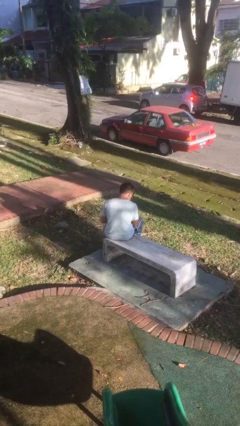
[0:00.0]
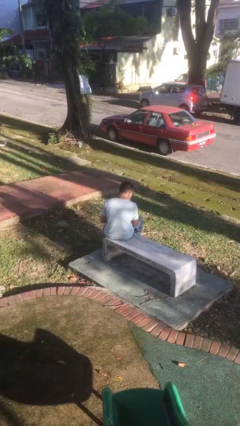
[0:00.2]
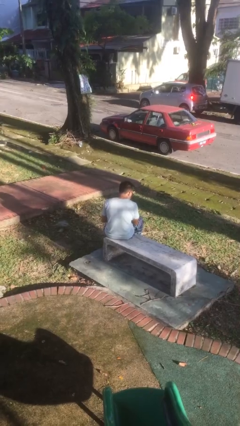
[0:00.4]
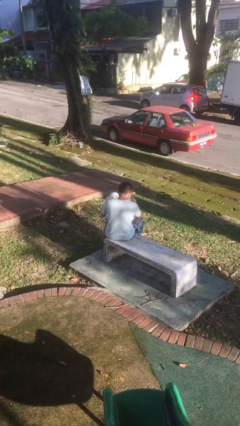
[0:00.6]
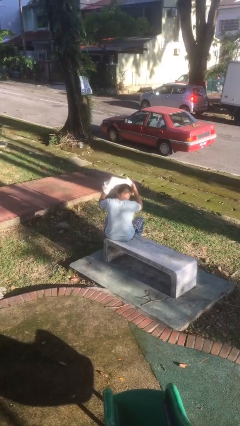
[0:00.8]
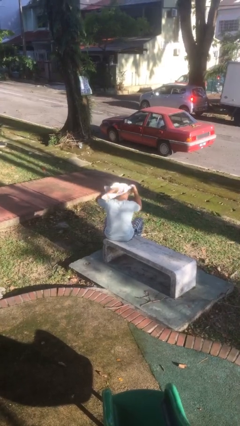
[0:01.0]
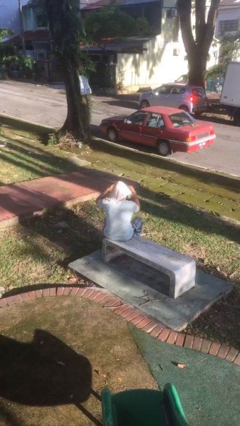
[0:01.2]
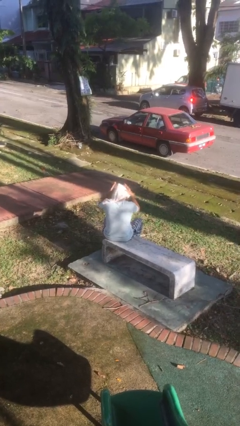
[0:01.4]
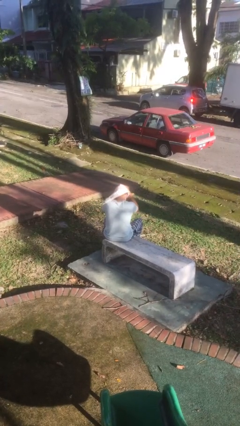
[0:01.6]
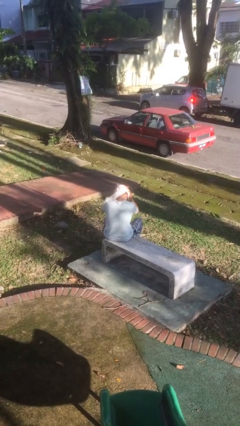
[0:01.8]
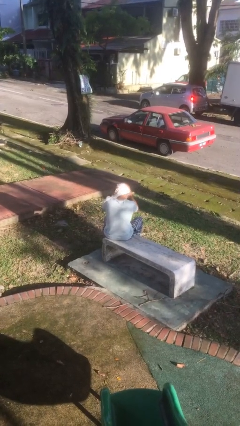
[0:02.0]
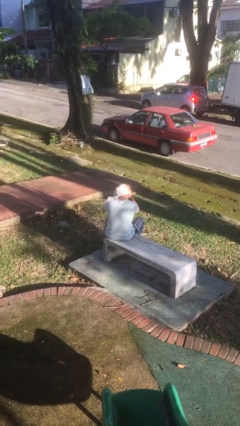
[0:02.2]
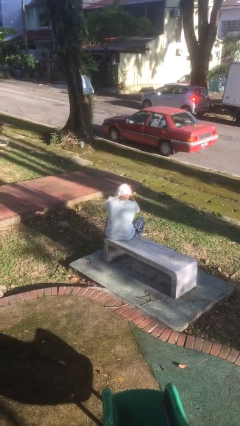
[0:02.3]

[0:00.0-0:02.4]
person dries hair with towel

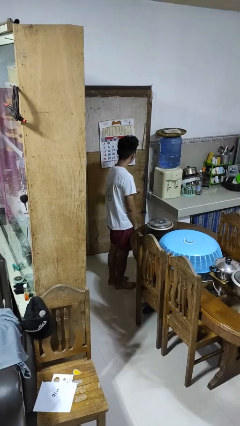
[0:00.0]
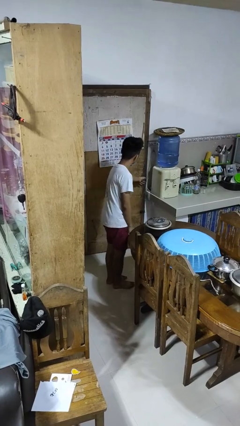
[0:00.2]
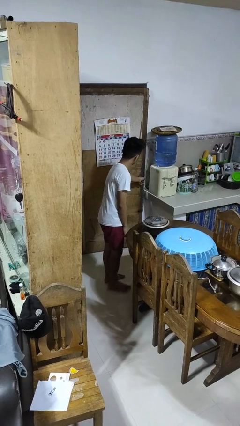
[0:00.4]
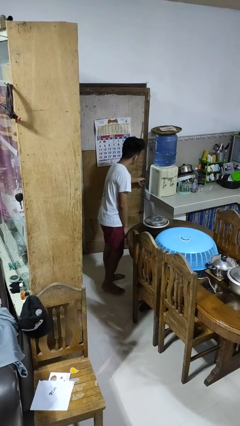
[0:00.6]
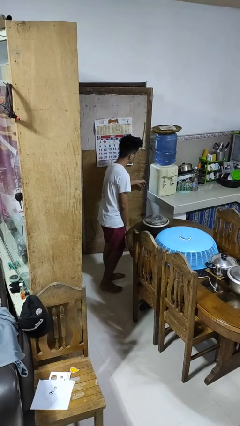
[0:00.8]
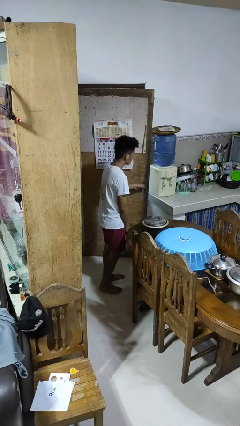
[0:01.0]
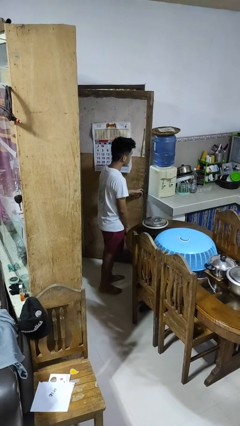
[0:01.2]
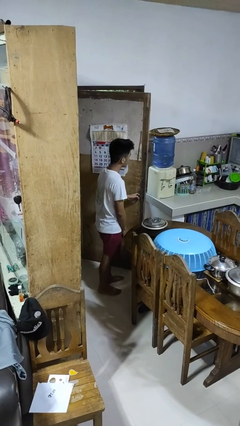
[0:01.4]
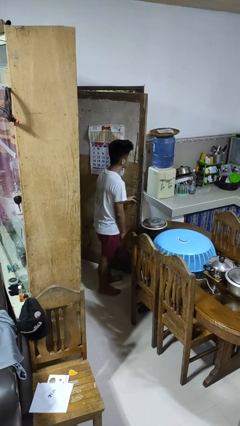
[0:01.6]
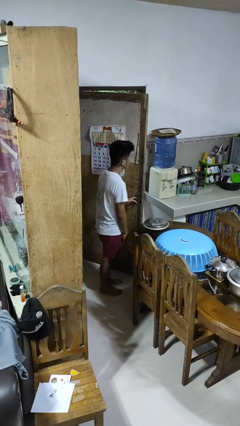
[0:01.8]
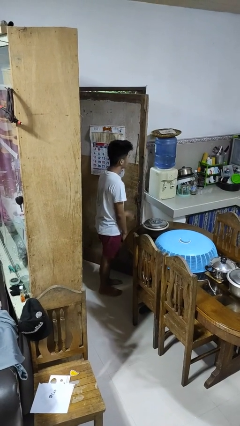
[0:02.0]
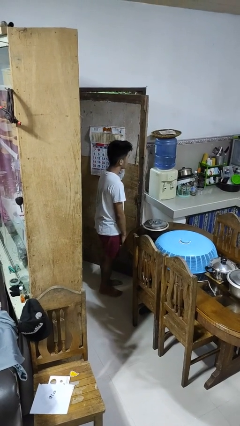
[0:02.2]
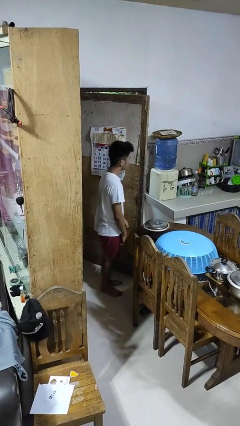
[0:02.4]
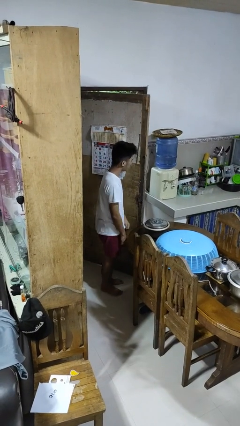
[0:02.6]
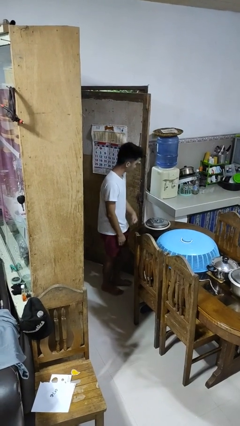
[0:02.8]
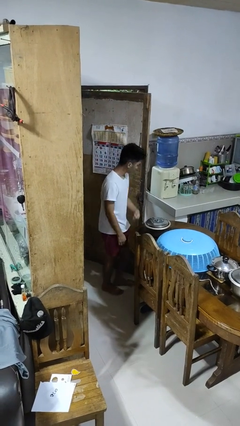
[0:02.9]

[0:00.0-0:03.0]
person opens facility door

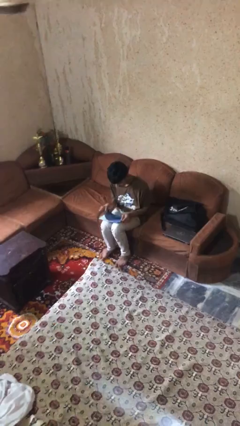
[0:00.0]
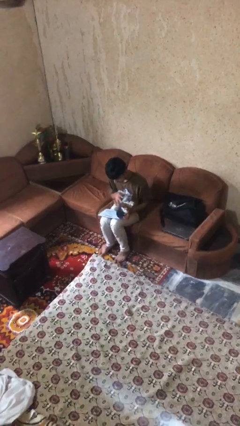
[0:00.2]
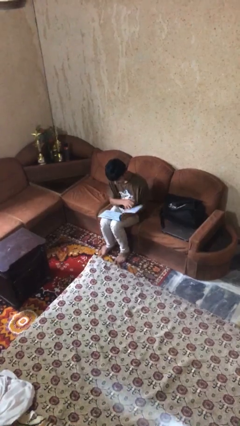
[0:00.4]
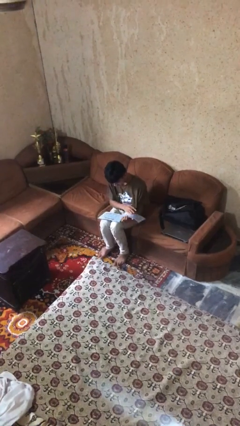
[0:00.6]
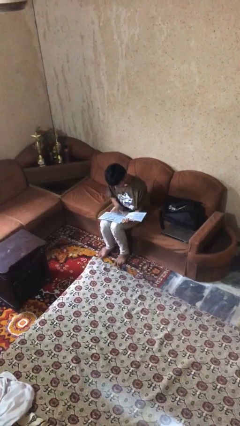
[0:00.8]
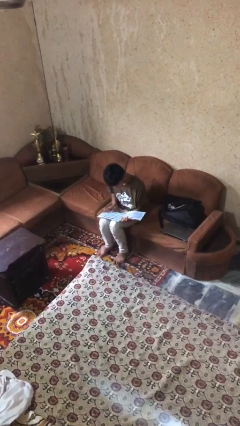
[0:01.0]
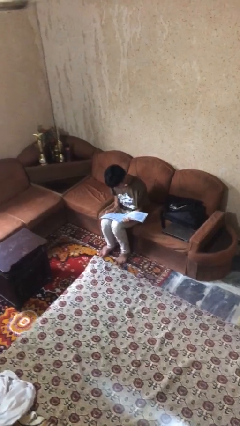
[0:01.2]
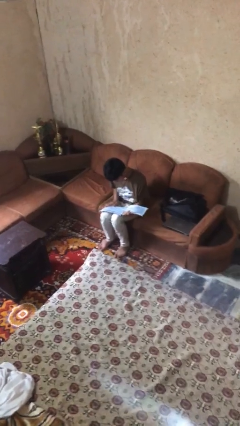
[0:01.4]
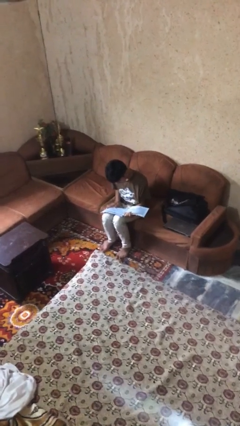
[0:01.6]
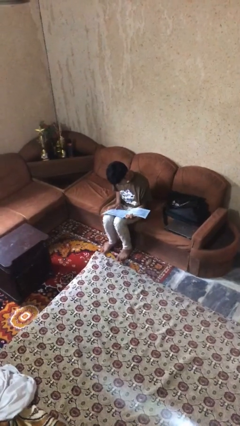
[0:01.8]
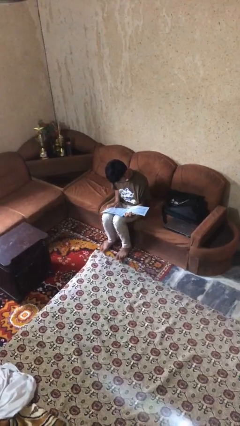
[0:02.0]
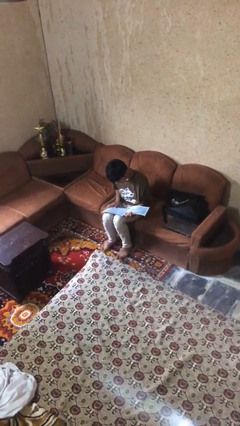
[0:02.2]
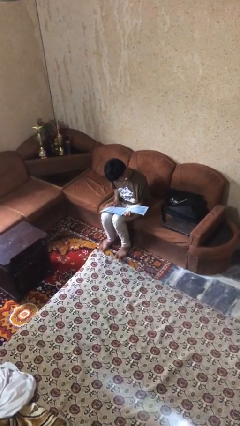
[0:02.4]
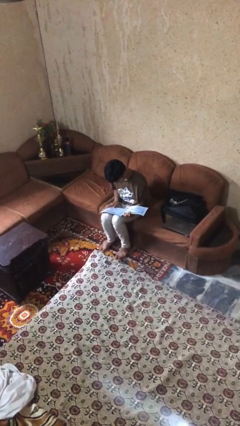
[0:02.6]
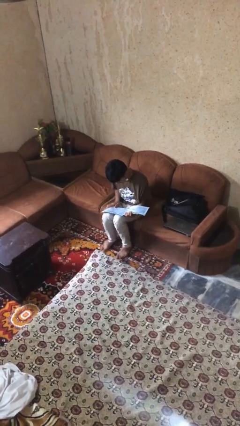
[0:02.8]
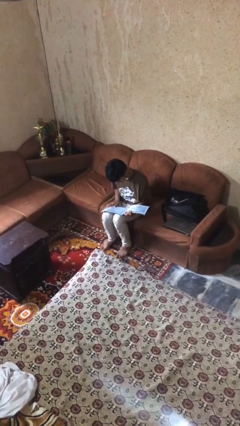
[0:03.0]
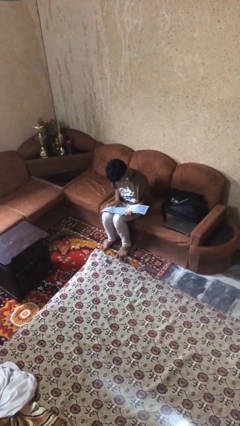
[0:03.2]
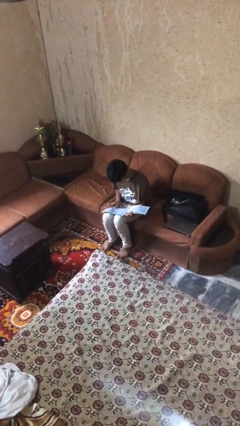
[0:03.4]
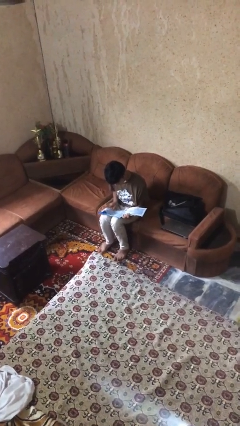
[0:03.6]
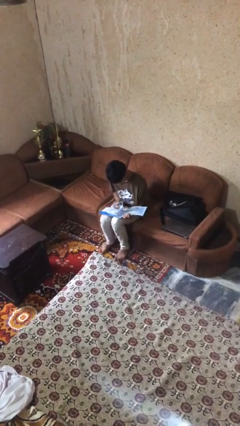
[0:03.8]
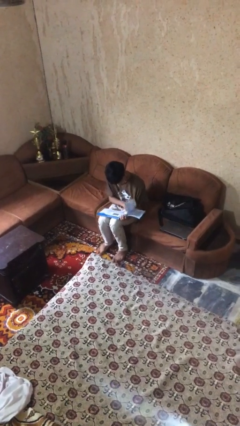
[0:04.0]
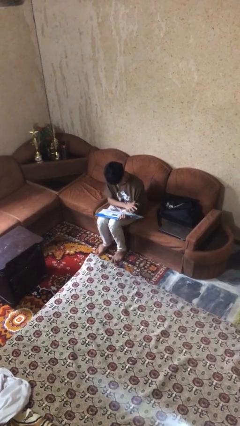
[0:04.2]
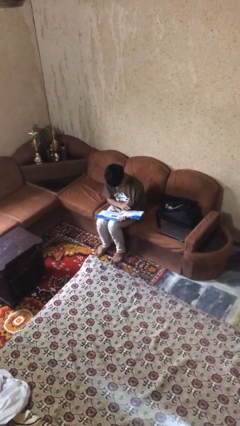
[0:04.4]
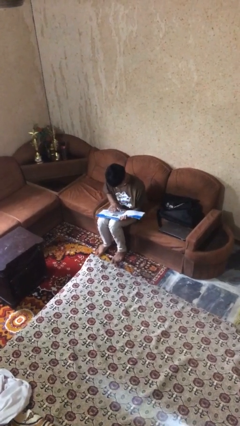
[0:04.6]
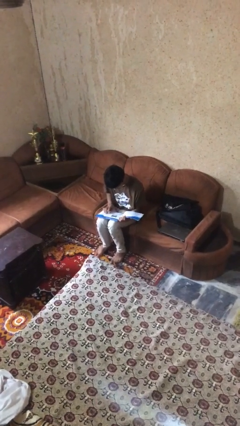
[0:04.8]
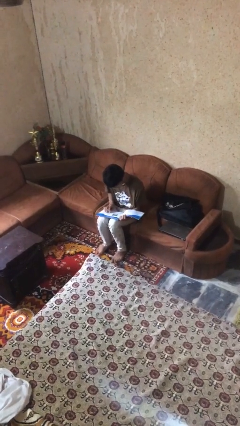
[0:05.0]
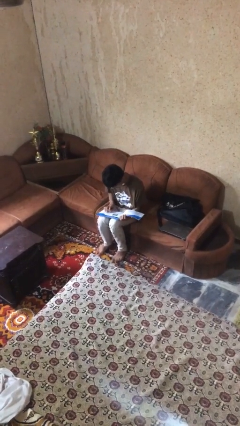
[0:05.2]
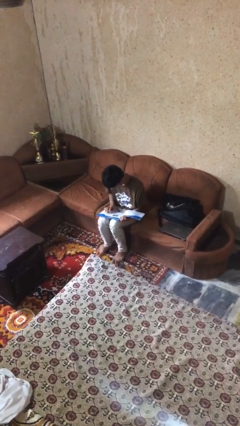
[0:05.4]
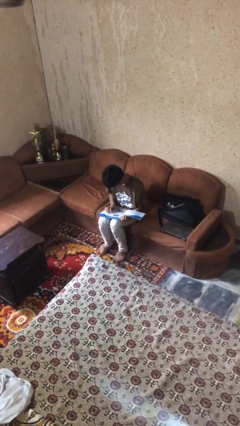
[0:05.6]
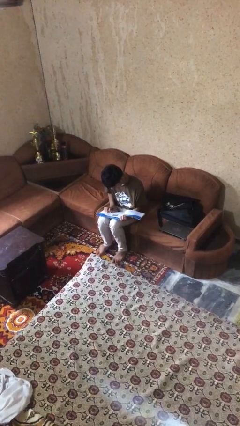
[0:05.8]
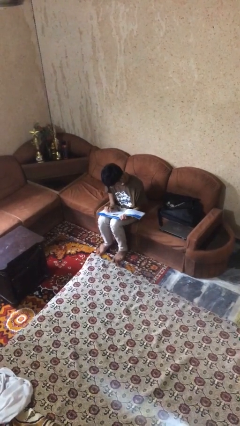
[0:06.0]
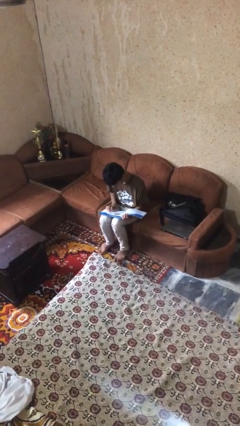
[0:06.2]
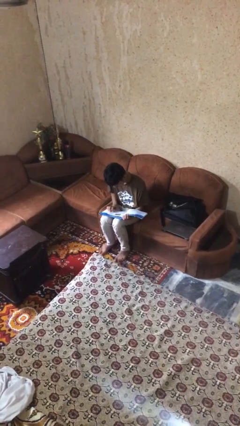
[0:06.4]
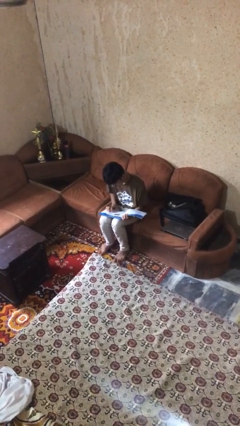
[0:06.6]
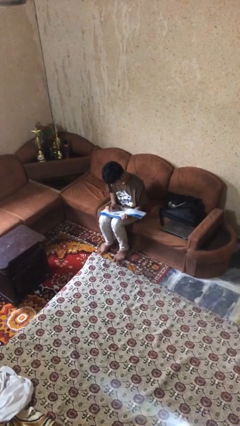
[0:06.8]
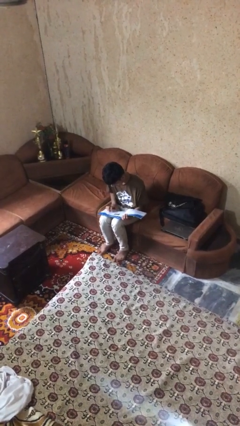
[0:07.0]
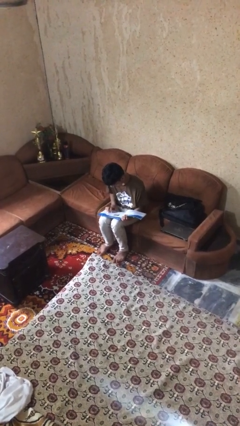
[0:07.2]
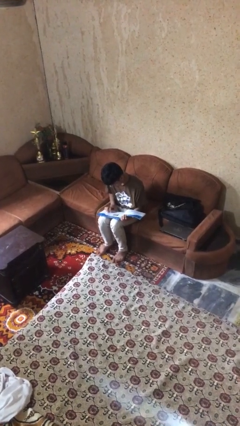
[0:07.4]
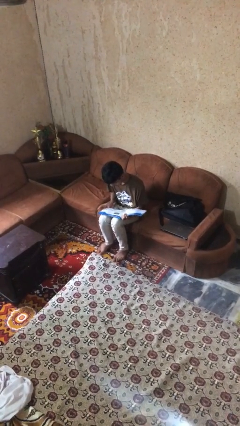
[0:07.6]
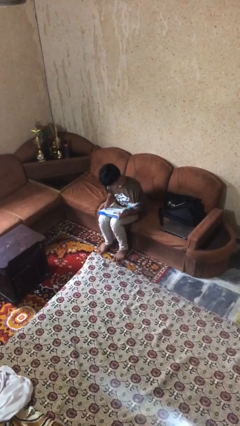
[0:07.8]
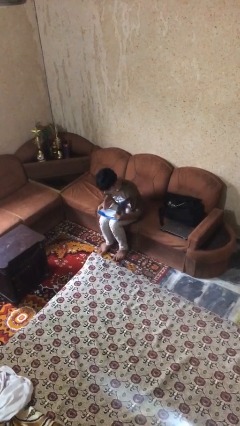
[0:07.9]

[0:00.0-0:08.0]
person reads document

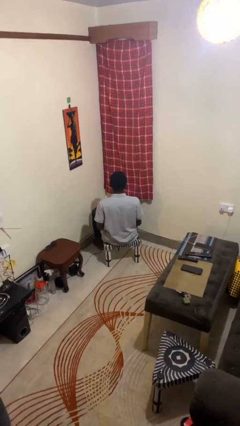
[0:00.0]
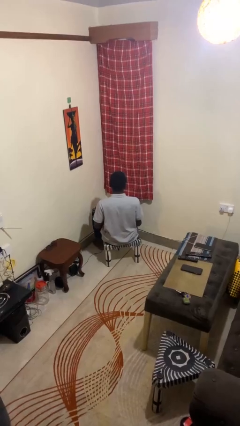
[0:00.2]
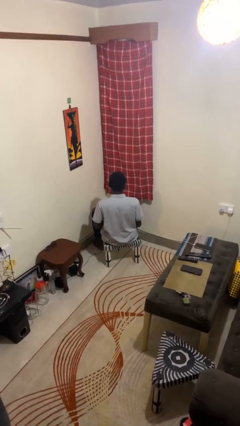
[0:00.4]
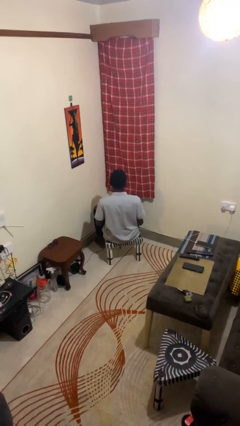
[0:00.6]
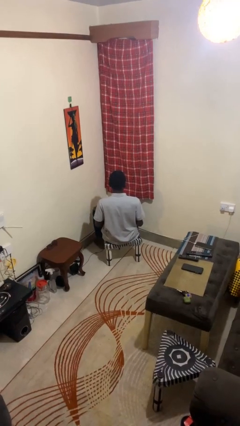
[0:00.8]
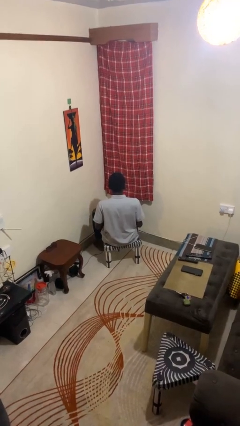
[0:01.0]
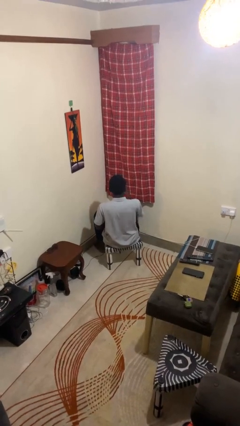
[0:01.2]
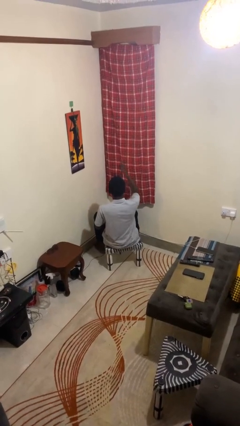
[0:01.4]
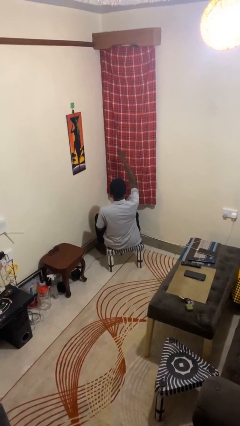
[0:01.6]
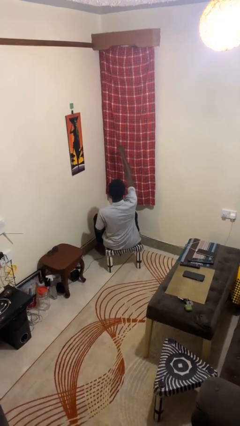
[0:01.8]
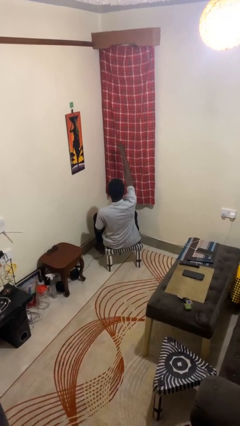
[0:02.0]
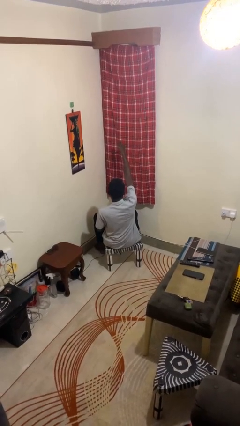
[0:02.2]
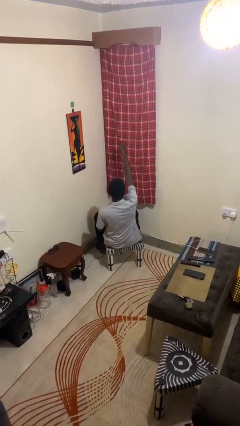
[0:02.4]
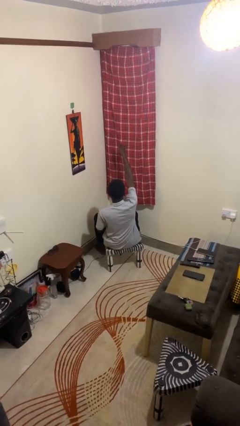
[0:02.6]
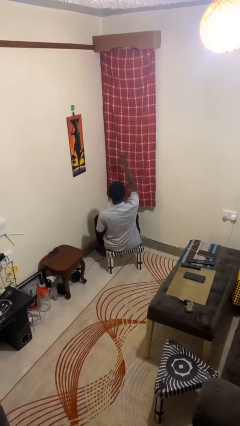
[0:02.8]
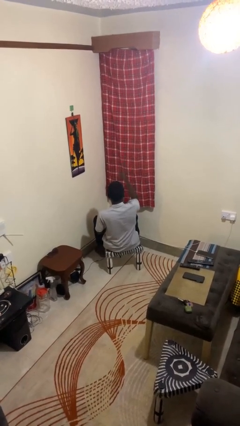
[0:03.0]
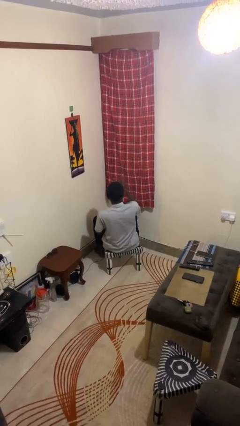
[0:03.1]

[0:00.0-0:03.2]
person gestures thumbs up

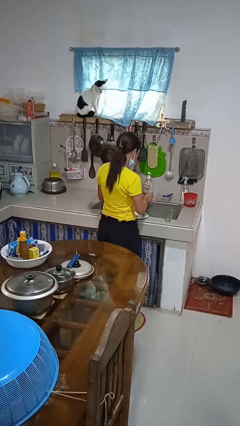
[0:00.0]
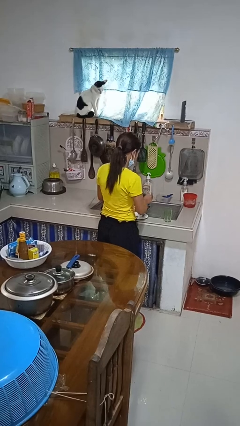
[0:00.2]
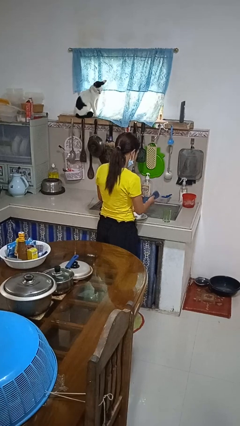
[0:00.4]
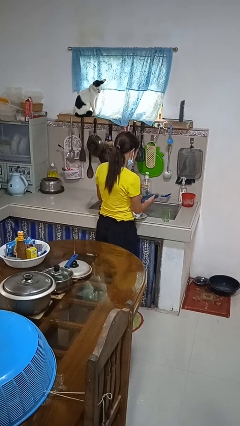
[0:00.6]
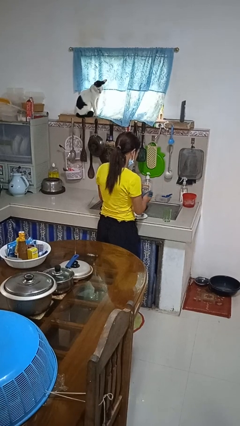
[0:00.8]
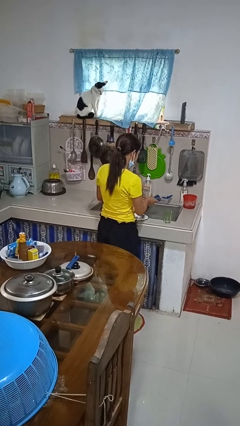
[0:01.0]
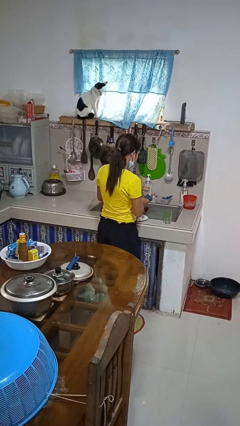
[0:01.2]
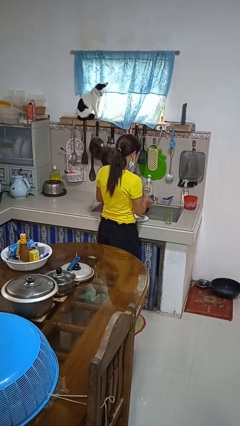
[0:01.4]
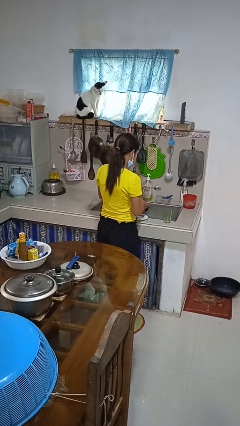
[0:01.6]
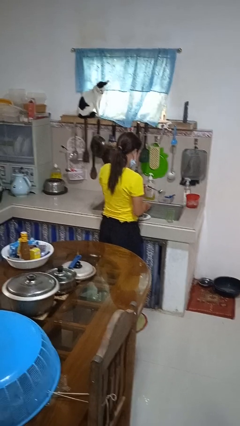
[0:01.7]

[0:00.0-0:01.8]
person dries dish
